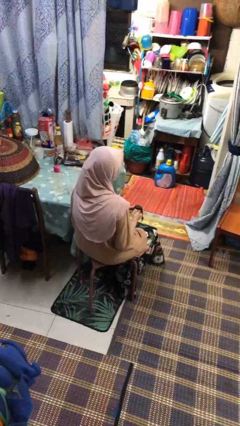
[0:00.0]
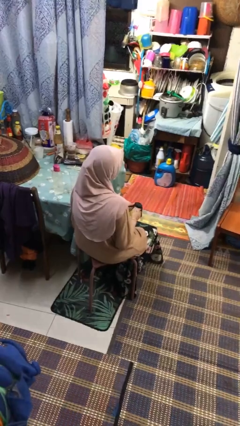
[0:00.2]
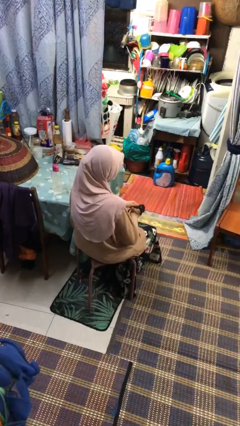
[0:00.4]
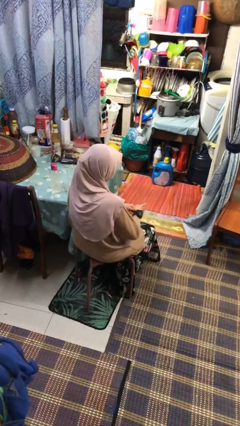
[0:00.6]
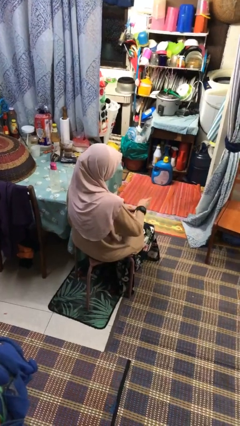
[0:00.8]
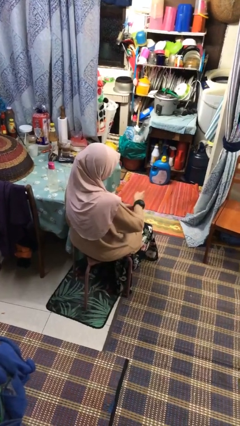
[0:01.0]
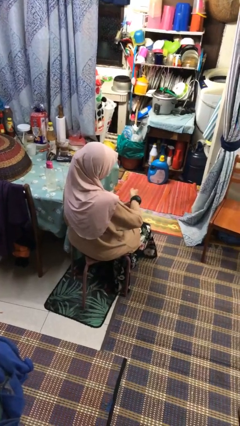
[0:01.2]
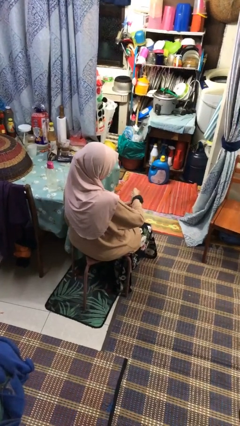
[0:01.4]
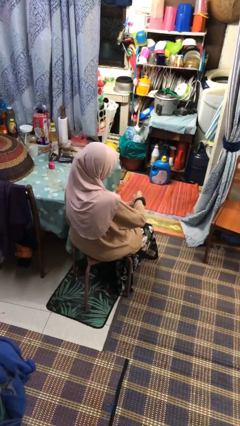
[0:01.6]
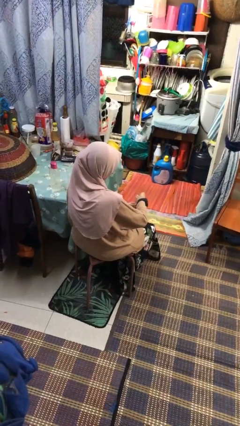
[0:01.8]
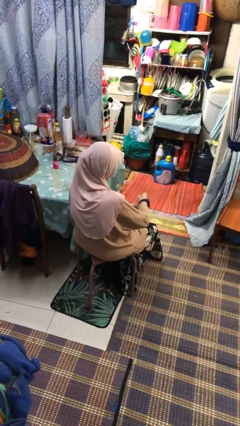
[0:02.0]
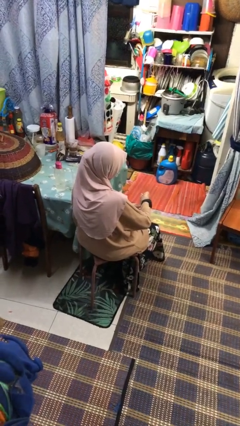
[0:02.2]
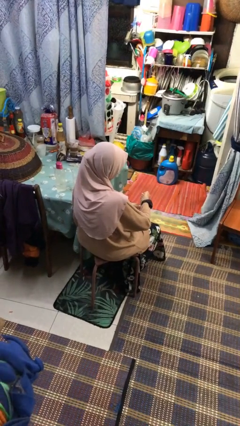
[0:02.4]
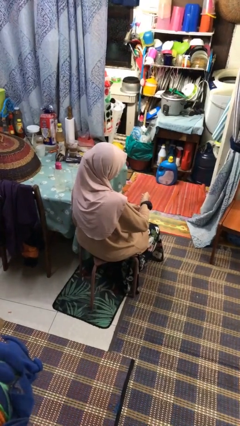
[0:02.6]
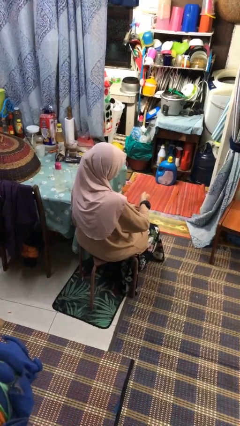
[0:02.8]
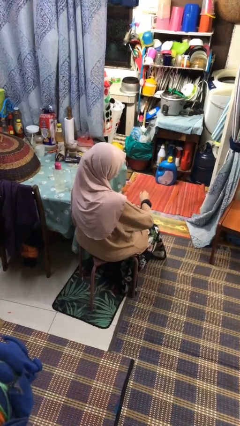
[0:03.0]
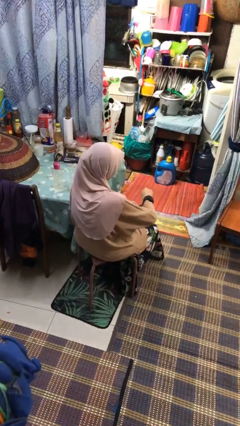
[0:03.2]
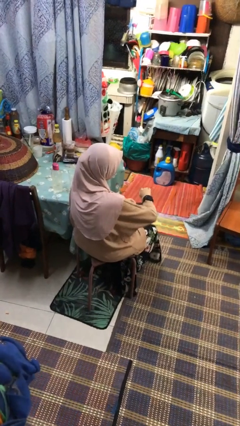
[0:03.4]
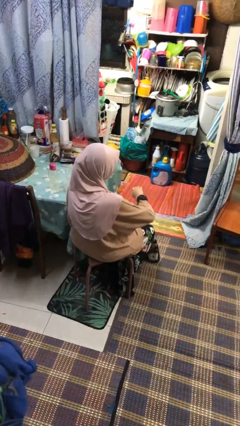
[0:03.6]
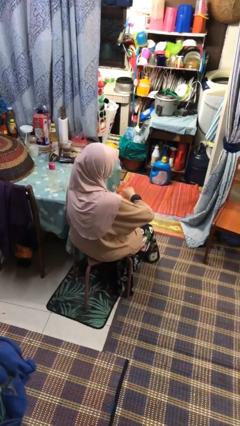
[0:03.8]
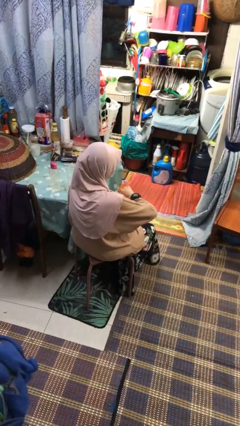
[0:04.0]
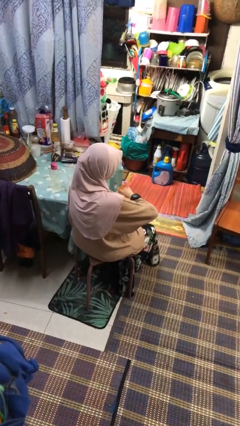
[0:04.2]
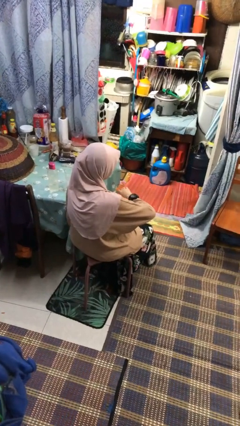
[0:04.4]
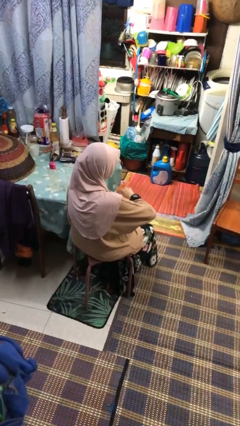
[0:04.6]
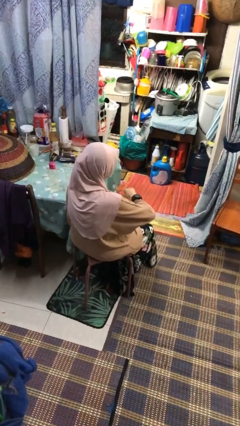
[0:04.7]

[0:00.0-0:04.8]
person puts on wristwatch

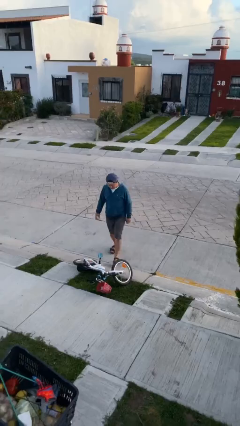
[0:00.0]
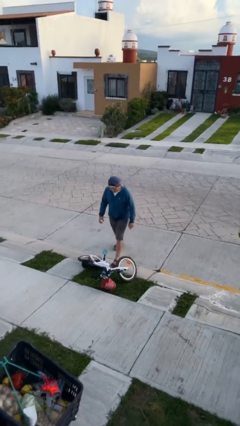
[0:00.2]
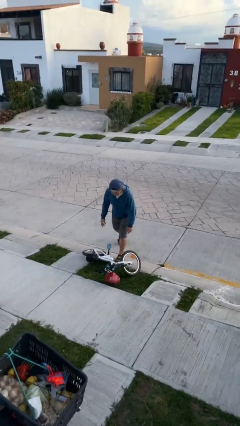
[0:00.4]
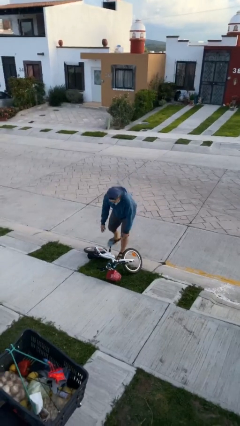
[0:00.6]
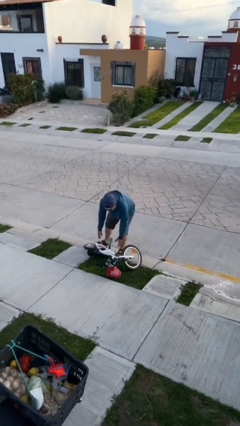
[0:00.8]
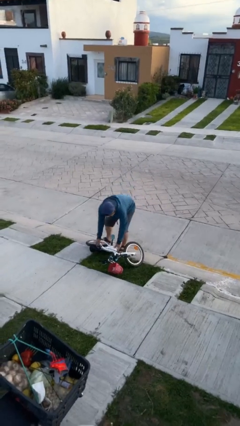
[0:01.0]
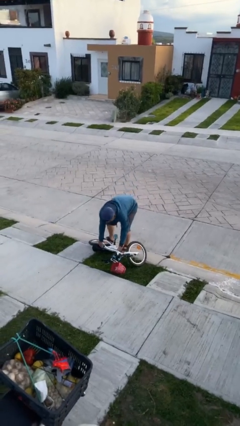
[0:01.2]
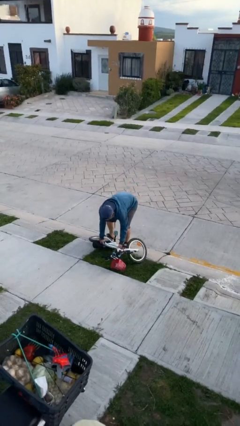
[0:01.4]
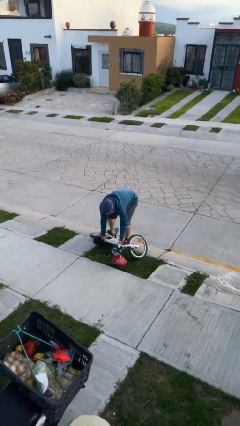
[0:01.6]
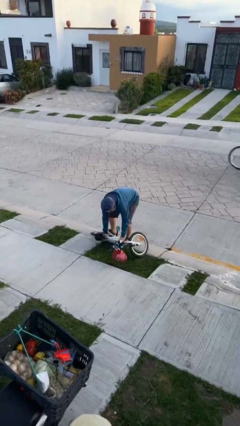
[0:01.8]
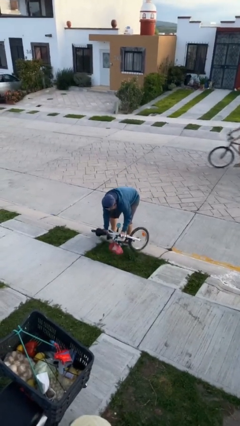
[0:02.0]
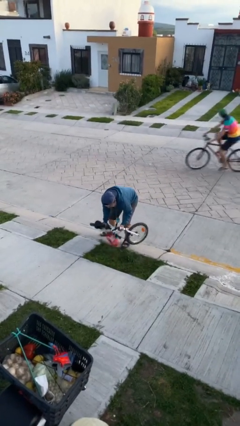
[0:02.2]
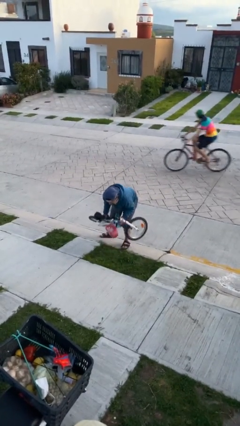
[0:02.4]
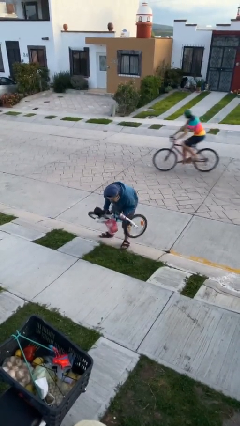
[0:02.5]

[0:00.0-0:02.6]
person picks up object from floor

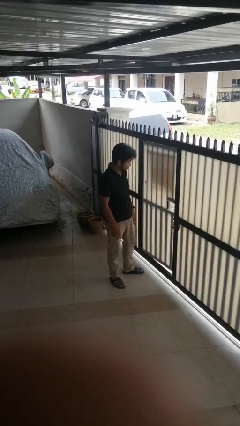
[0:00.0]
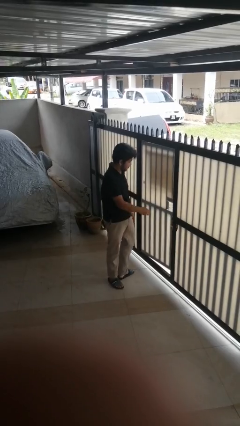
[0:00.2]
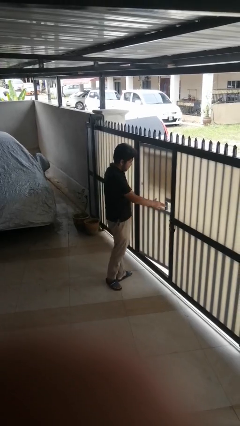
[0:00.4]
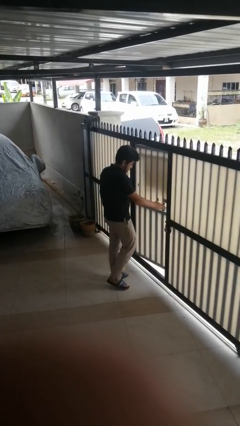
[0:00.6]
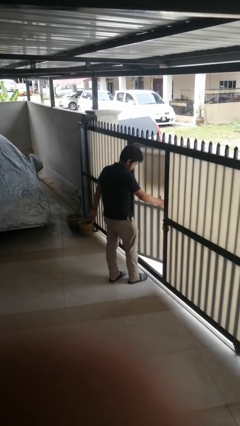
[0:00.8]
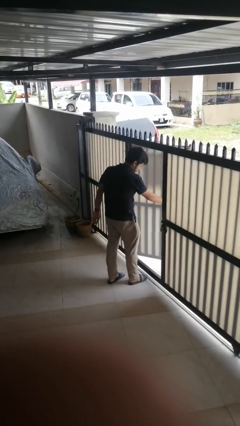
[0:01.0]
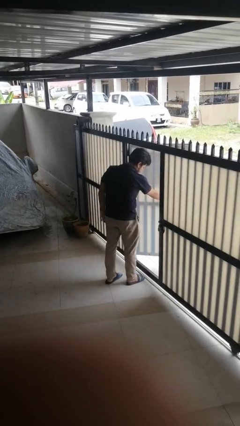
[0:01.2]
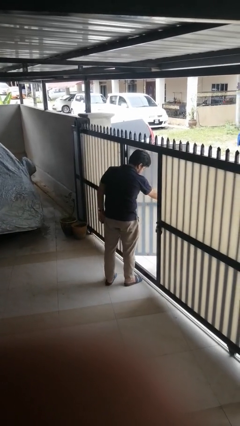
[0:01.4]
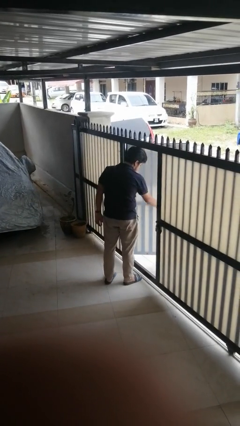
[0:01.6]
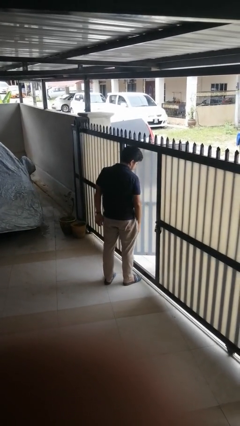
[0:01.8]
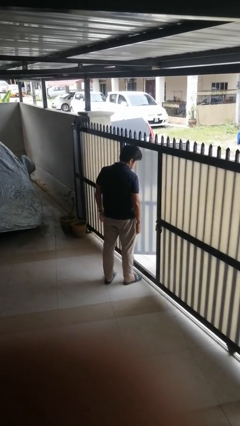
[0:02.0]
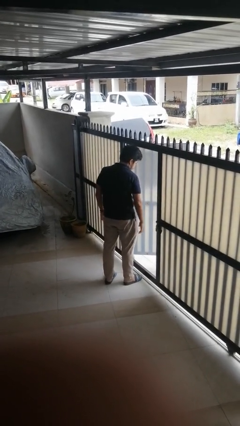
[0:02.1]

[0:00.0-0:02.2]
person opens gate

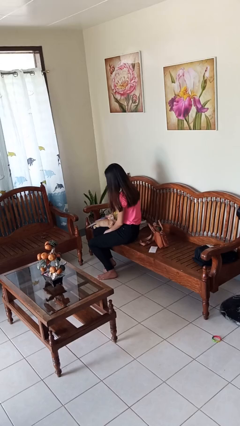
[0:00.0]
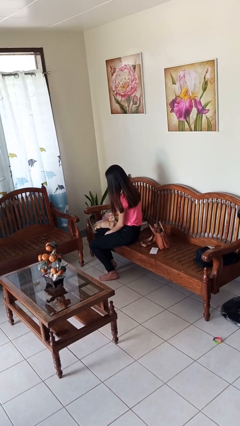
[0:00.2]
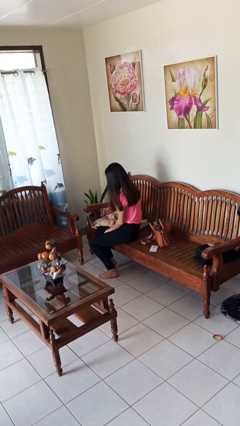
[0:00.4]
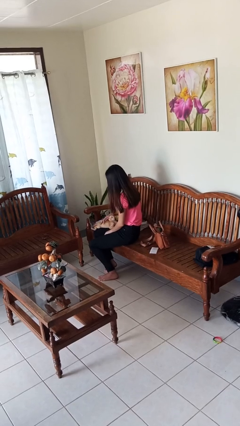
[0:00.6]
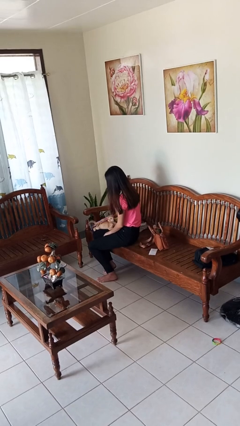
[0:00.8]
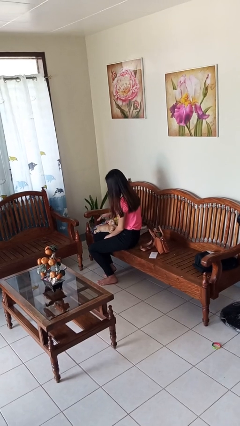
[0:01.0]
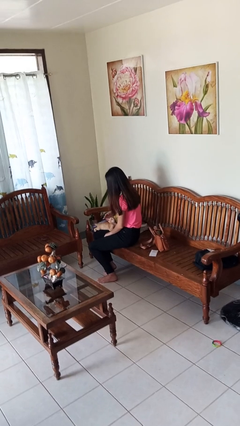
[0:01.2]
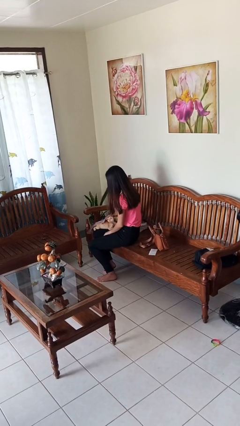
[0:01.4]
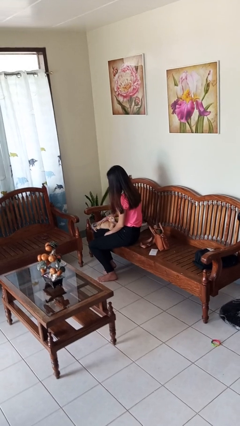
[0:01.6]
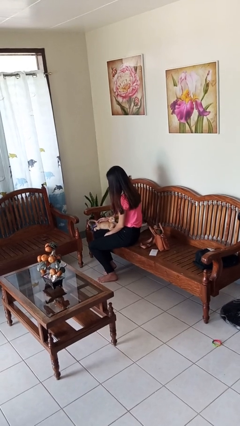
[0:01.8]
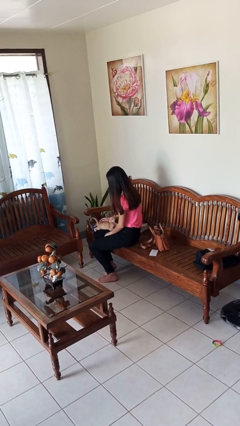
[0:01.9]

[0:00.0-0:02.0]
person pets cat

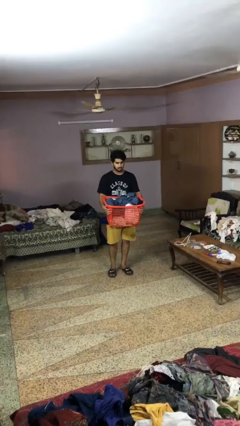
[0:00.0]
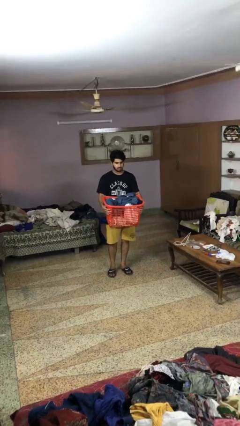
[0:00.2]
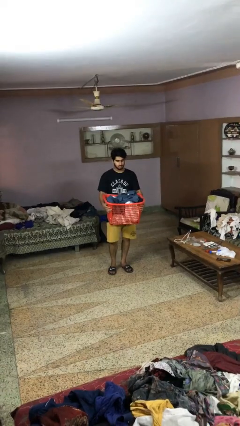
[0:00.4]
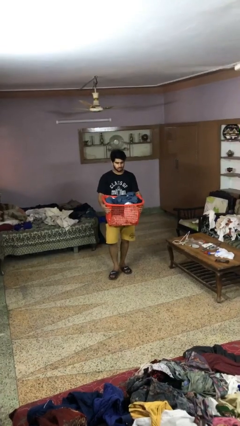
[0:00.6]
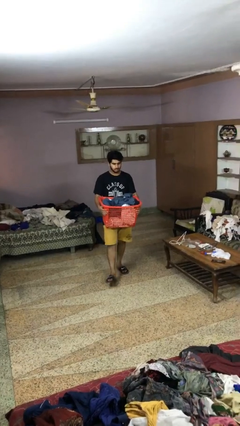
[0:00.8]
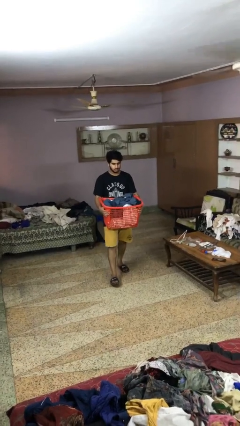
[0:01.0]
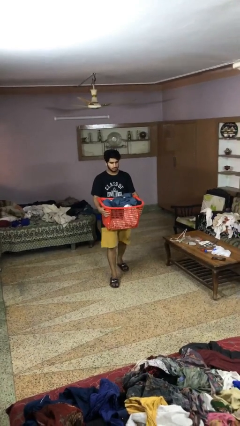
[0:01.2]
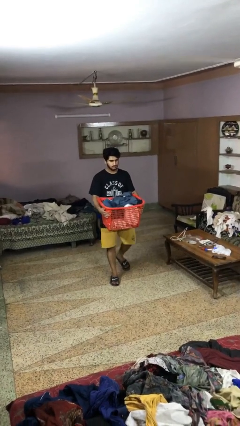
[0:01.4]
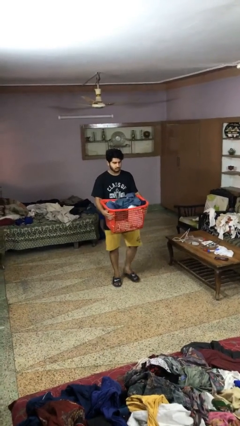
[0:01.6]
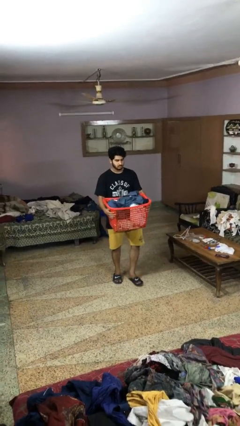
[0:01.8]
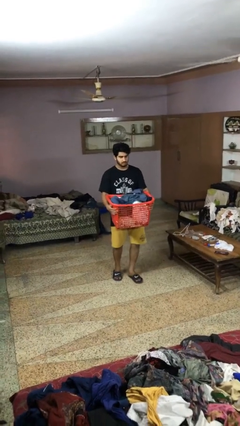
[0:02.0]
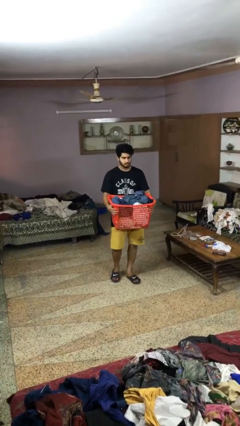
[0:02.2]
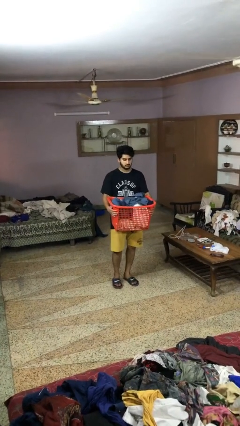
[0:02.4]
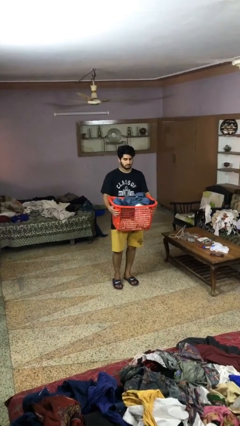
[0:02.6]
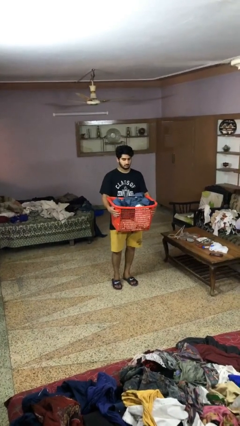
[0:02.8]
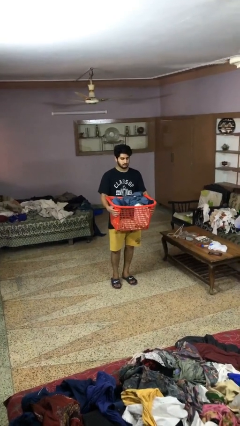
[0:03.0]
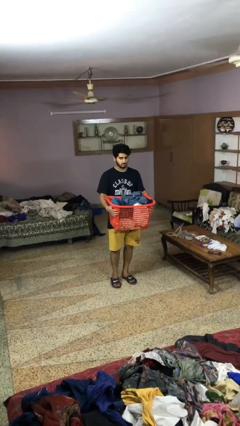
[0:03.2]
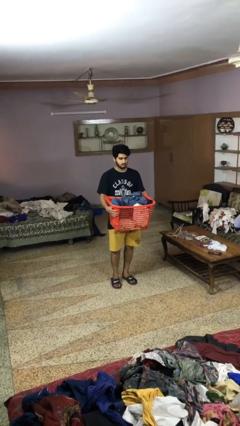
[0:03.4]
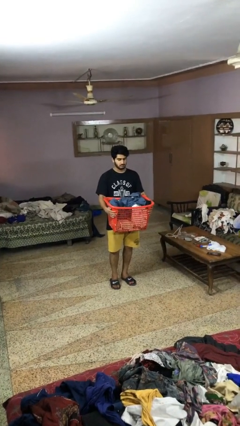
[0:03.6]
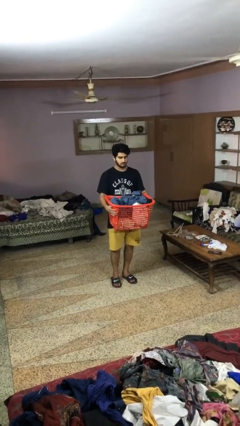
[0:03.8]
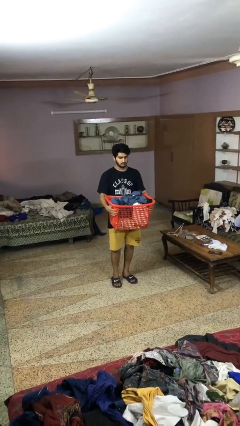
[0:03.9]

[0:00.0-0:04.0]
person carries laundry basket

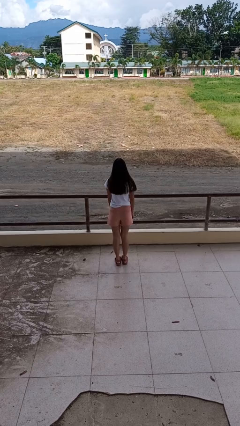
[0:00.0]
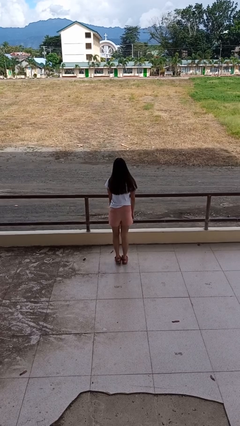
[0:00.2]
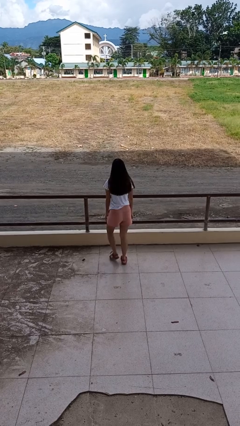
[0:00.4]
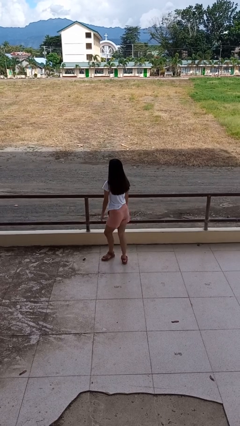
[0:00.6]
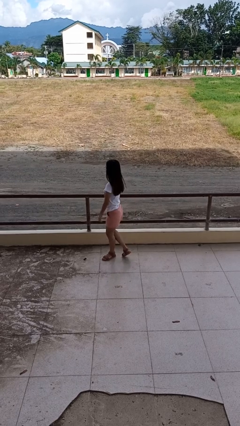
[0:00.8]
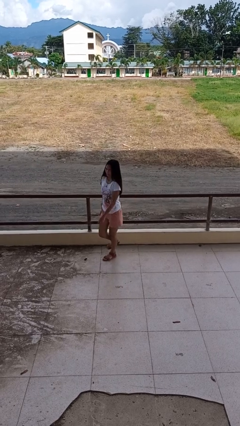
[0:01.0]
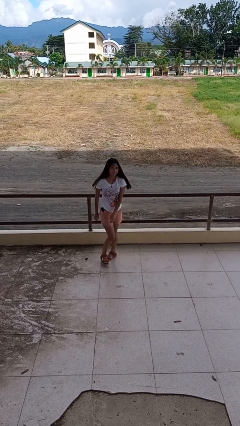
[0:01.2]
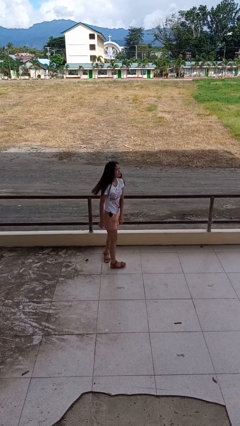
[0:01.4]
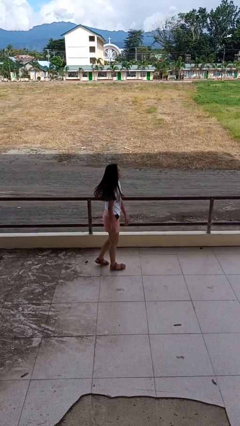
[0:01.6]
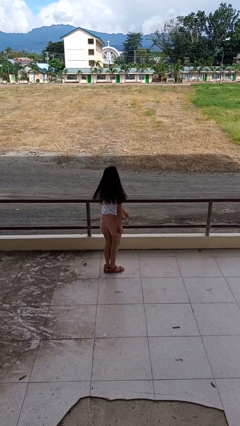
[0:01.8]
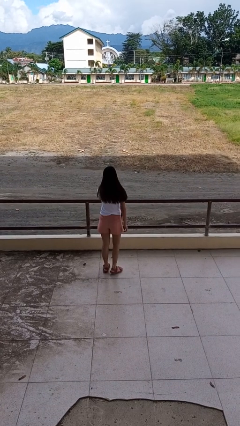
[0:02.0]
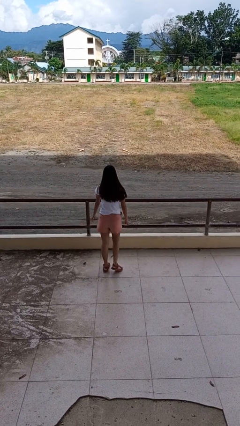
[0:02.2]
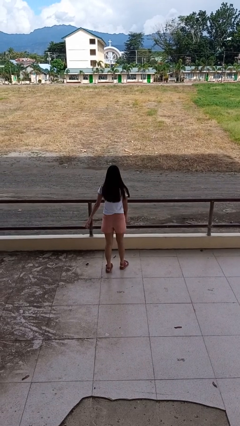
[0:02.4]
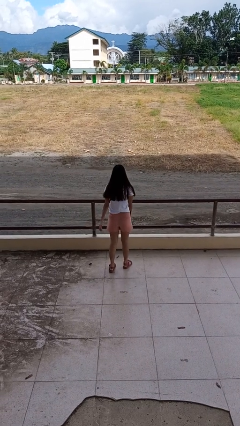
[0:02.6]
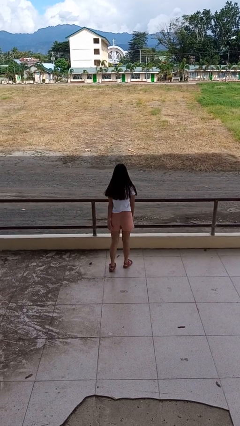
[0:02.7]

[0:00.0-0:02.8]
person twirls
